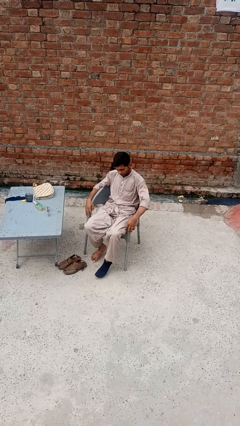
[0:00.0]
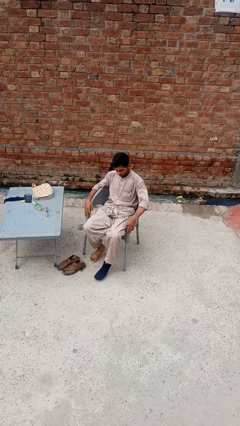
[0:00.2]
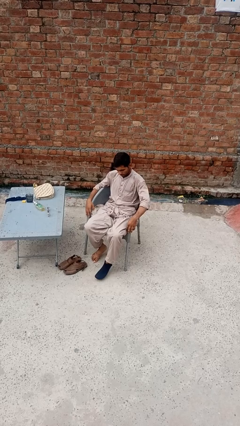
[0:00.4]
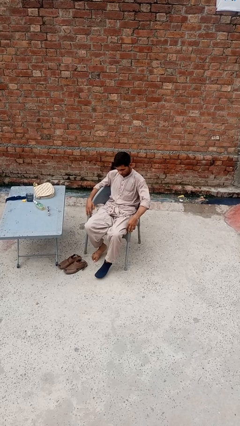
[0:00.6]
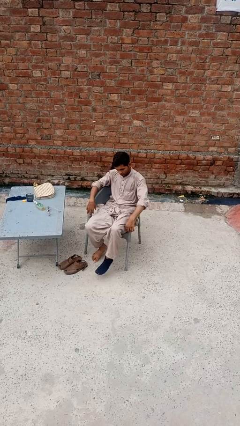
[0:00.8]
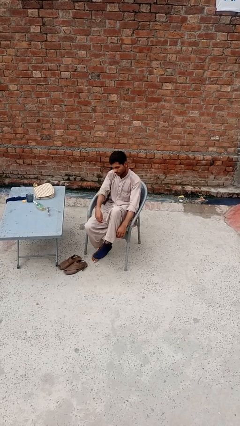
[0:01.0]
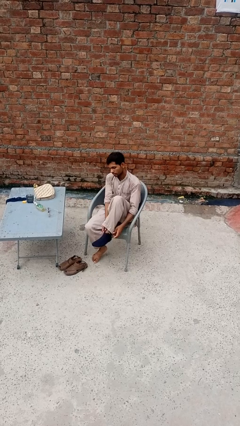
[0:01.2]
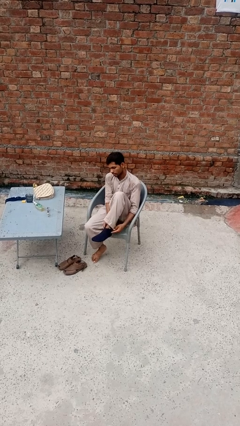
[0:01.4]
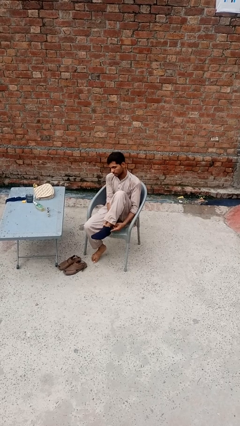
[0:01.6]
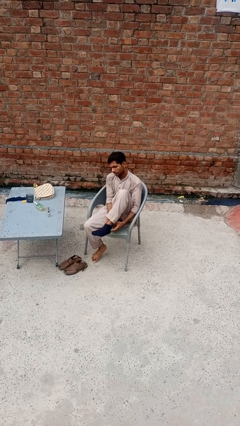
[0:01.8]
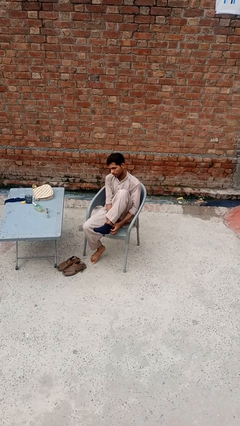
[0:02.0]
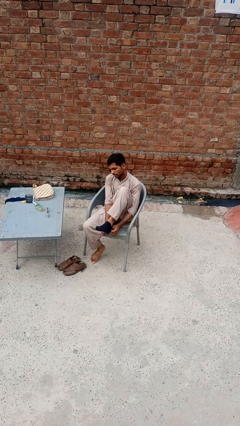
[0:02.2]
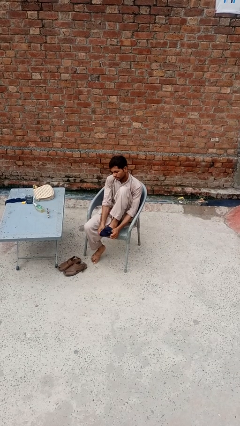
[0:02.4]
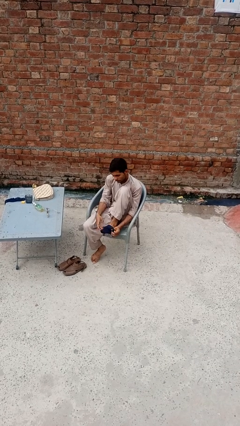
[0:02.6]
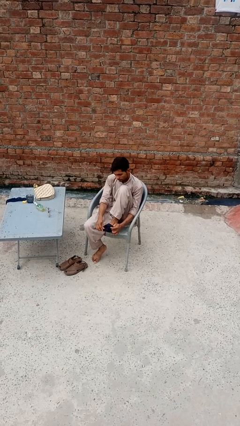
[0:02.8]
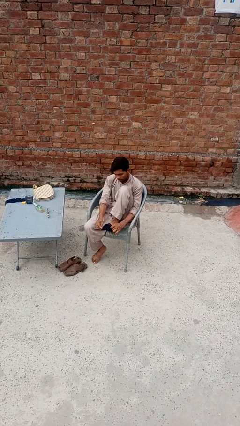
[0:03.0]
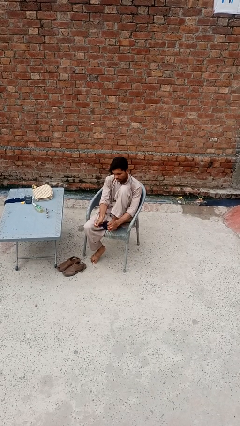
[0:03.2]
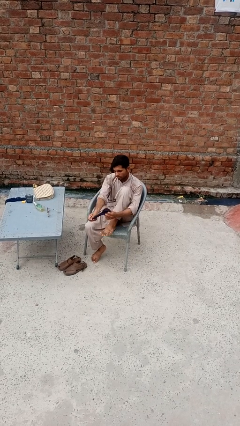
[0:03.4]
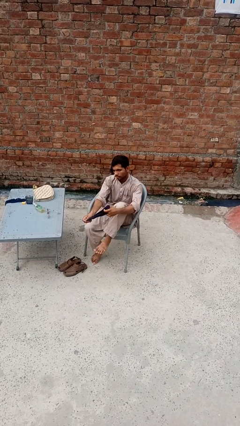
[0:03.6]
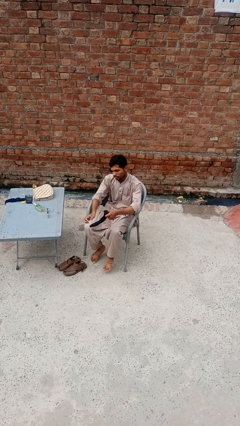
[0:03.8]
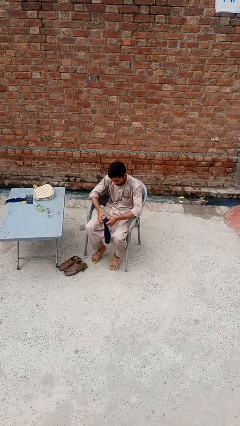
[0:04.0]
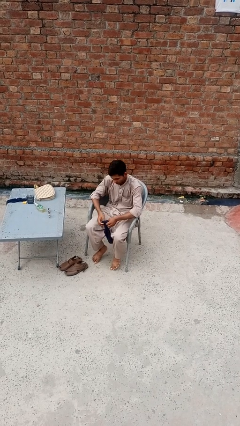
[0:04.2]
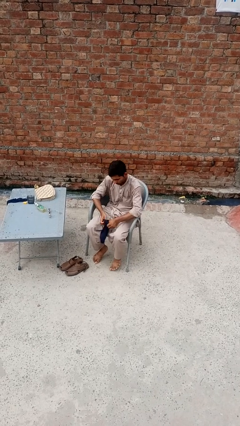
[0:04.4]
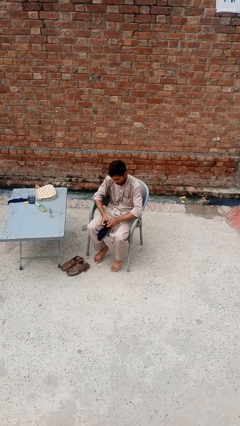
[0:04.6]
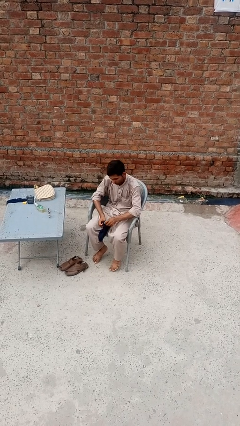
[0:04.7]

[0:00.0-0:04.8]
person takes off socks

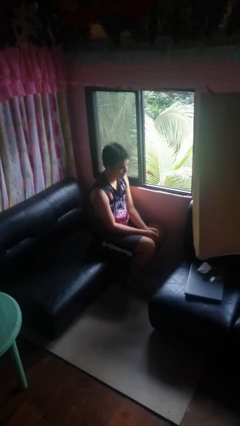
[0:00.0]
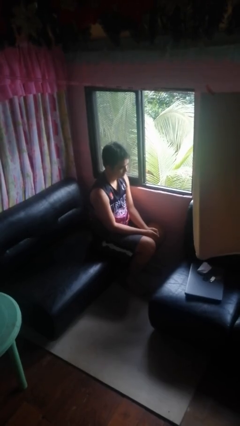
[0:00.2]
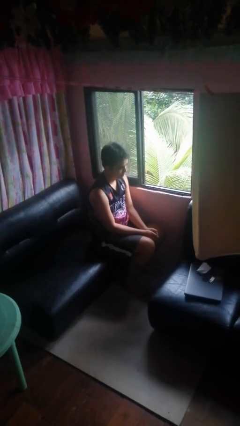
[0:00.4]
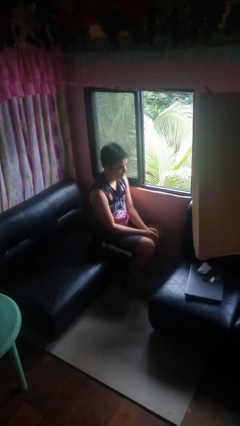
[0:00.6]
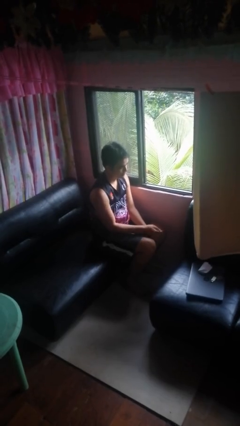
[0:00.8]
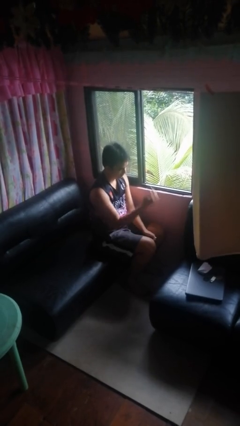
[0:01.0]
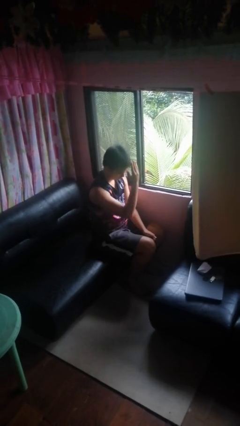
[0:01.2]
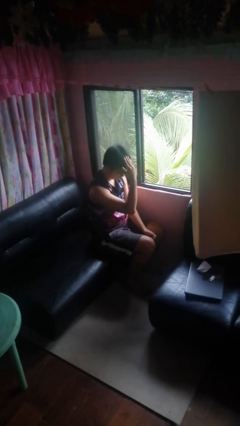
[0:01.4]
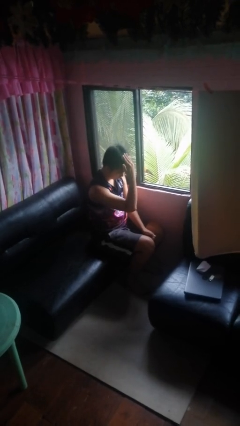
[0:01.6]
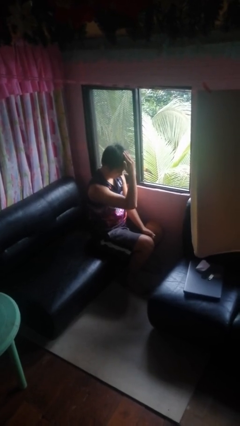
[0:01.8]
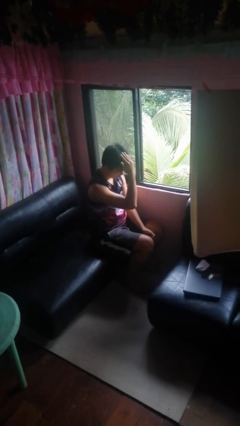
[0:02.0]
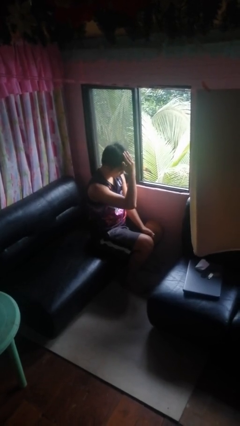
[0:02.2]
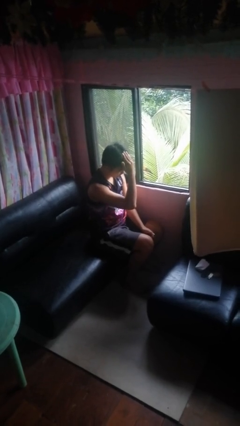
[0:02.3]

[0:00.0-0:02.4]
person pats head

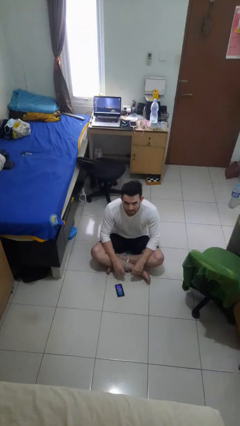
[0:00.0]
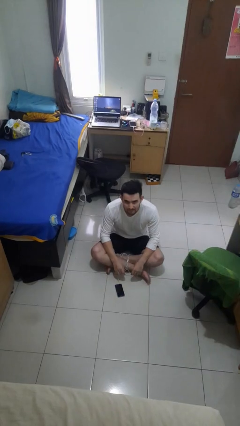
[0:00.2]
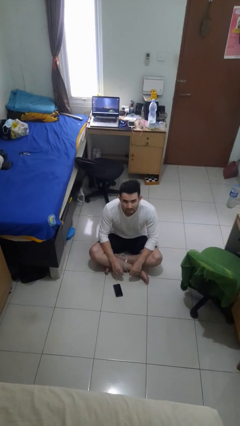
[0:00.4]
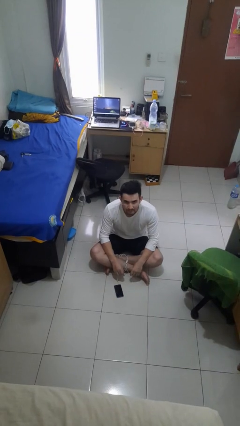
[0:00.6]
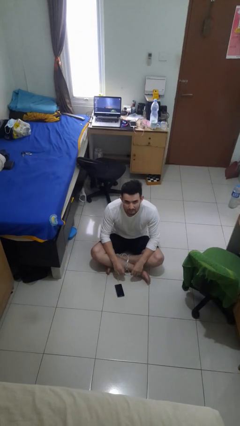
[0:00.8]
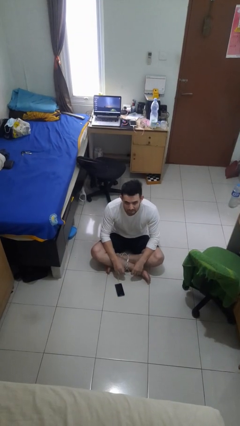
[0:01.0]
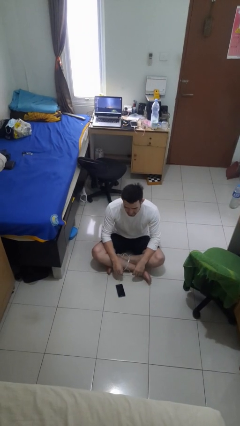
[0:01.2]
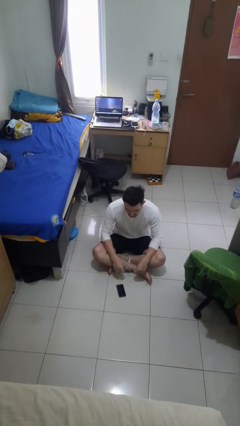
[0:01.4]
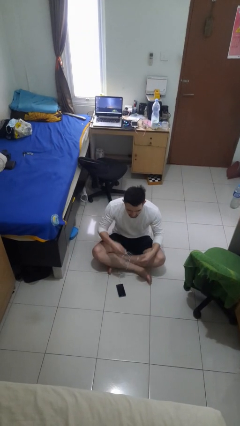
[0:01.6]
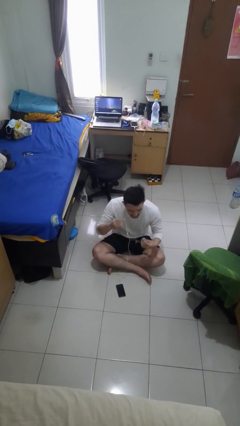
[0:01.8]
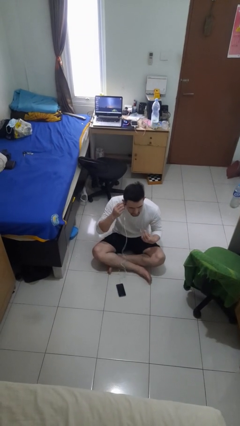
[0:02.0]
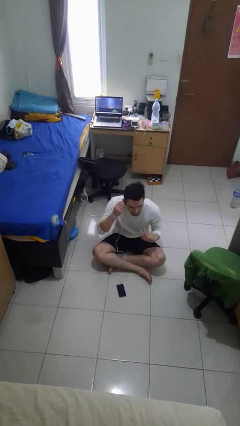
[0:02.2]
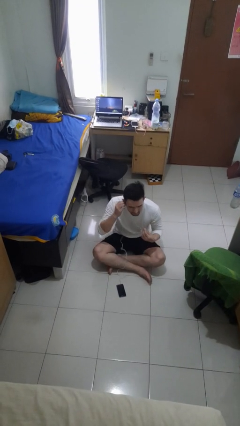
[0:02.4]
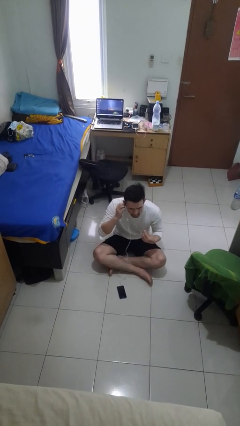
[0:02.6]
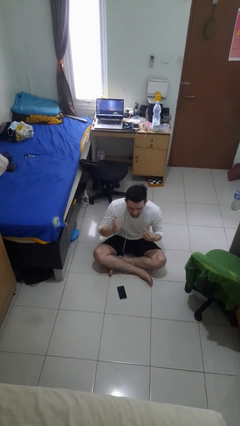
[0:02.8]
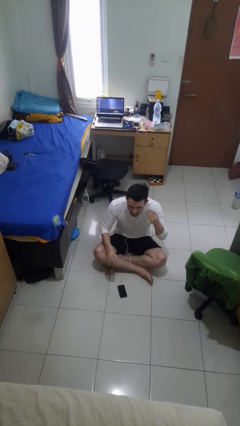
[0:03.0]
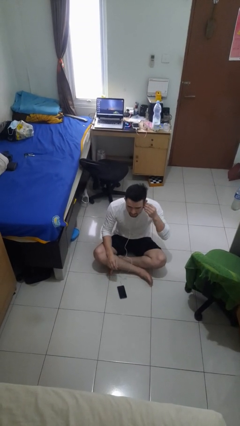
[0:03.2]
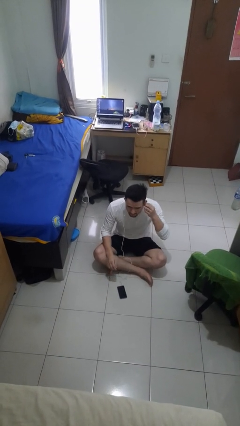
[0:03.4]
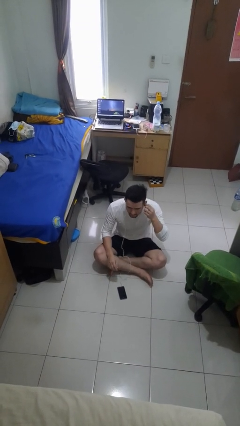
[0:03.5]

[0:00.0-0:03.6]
person puts on headphones

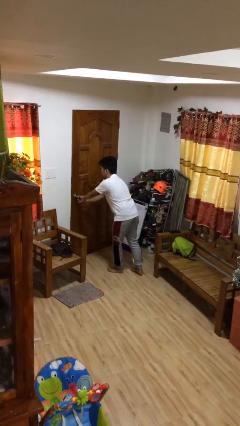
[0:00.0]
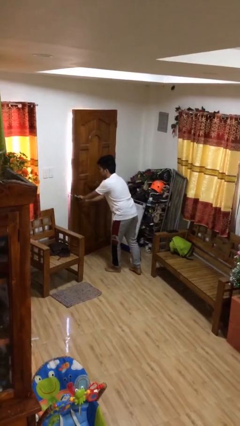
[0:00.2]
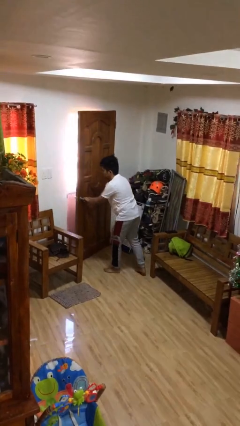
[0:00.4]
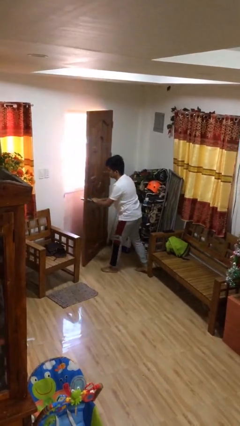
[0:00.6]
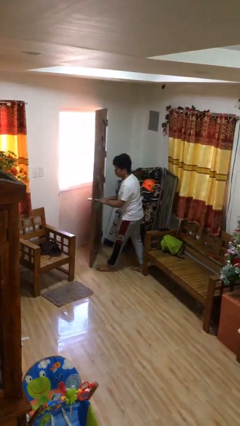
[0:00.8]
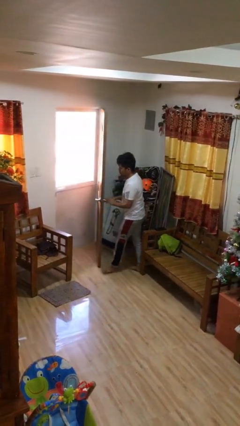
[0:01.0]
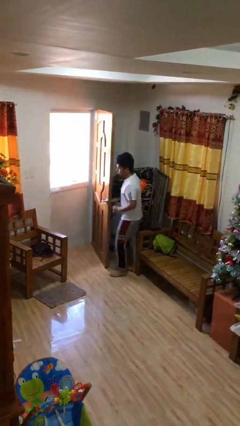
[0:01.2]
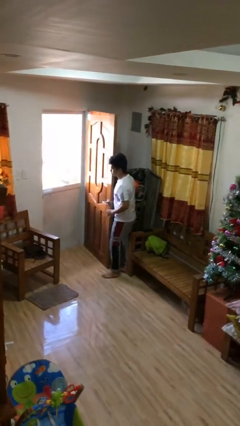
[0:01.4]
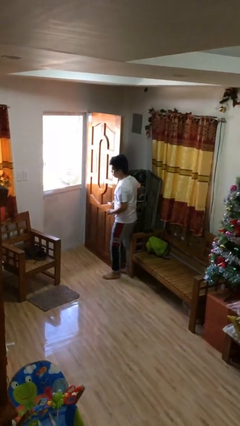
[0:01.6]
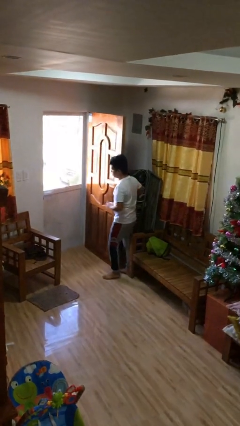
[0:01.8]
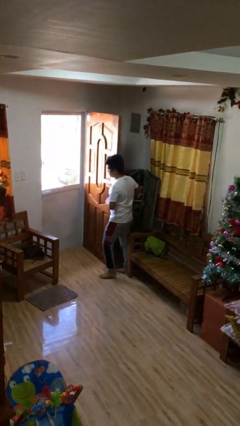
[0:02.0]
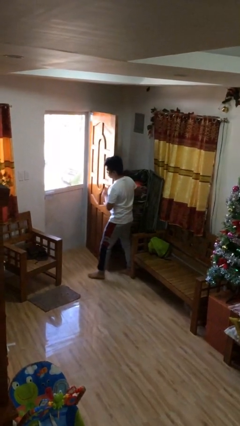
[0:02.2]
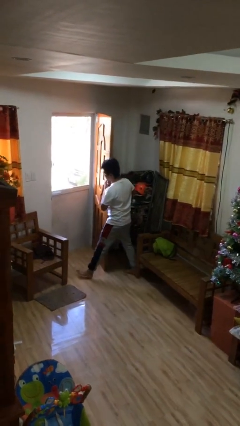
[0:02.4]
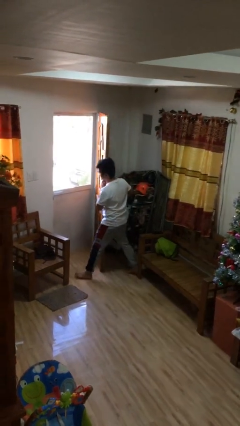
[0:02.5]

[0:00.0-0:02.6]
person opens facility door

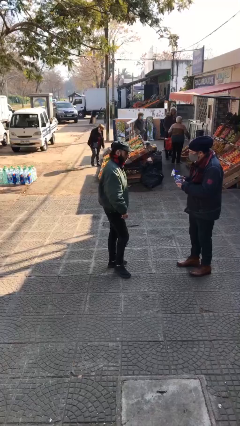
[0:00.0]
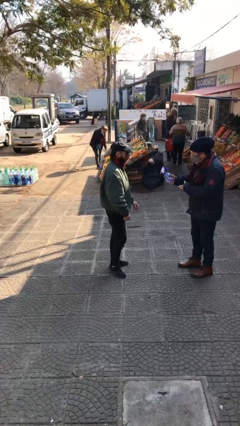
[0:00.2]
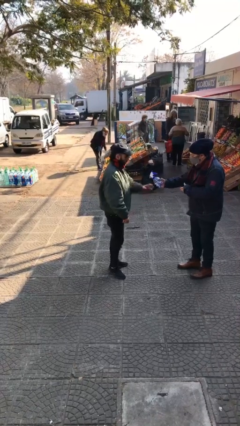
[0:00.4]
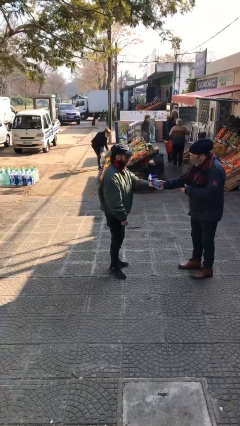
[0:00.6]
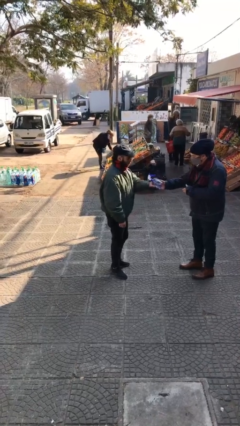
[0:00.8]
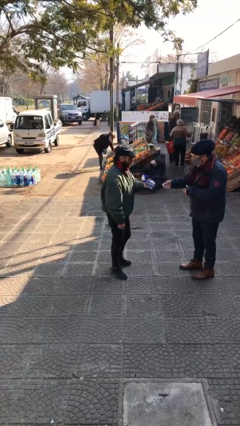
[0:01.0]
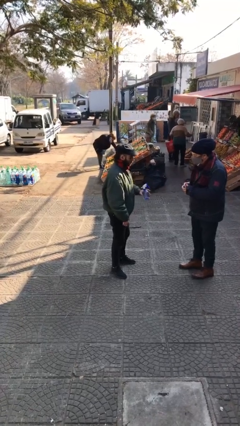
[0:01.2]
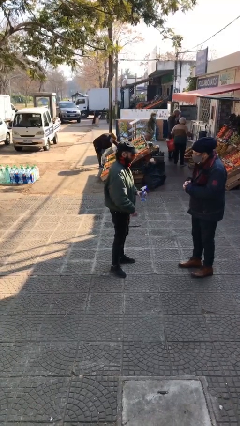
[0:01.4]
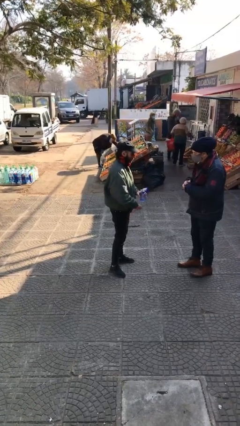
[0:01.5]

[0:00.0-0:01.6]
person transfers object to person

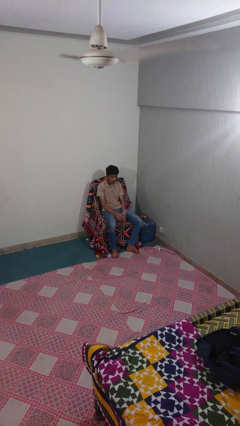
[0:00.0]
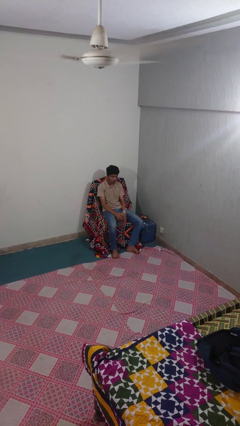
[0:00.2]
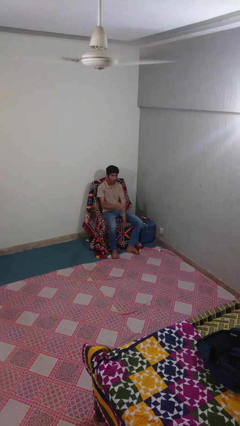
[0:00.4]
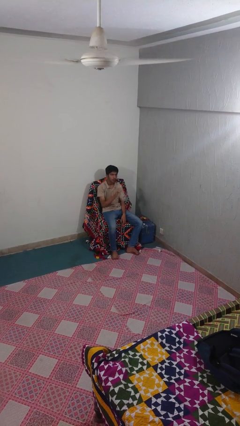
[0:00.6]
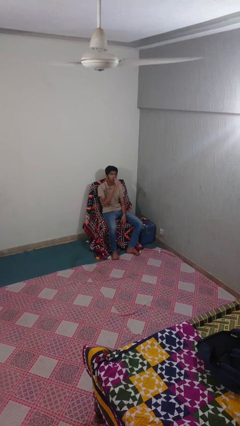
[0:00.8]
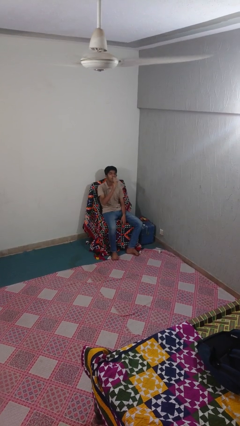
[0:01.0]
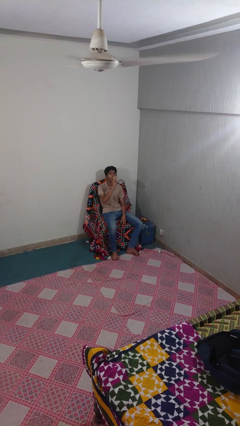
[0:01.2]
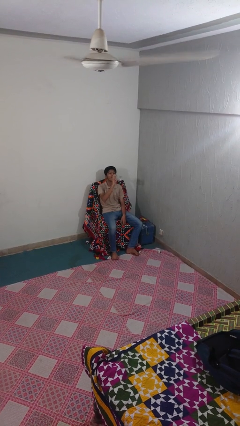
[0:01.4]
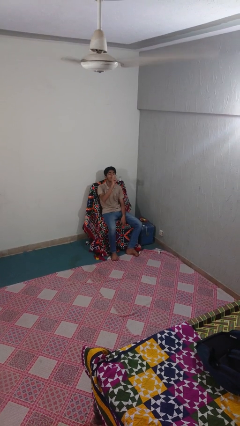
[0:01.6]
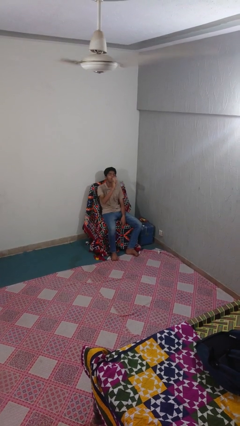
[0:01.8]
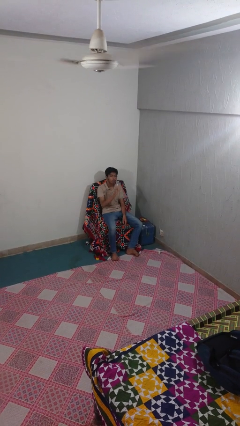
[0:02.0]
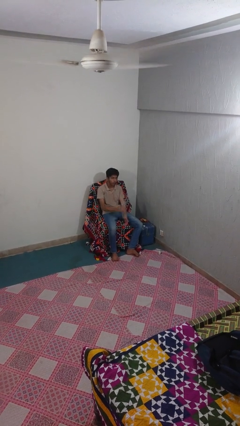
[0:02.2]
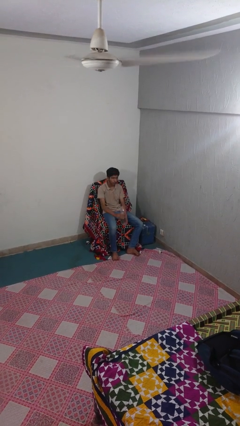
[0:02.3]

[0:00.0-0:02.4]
person drinks from bottle
